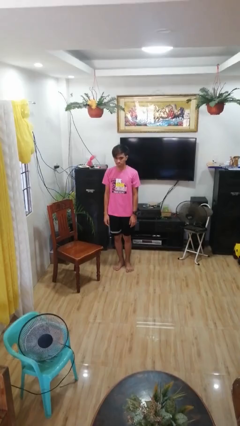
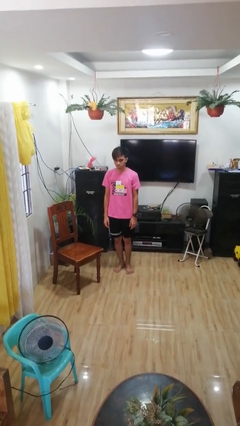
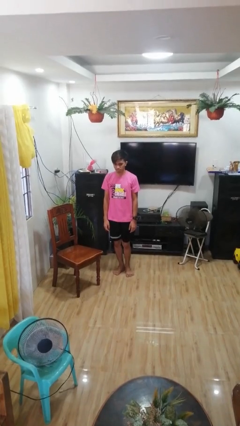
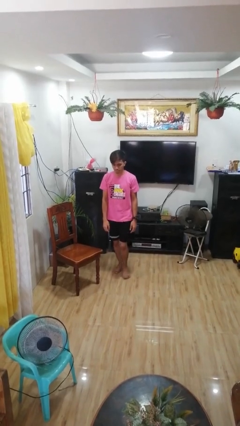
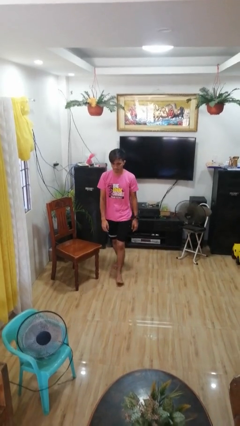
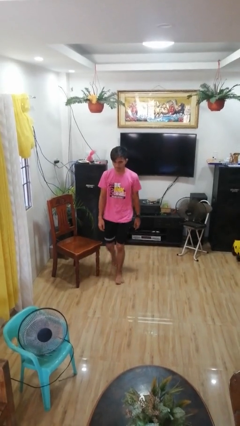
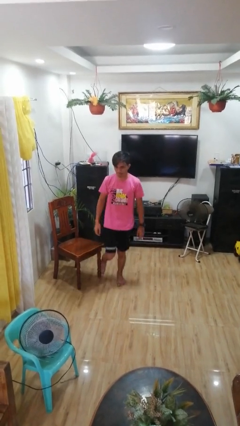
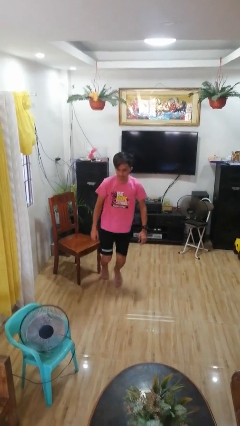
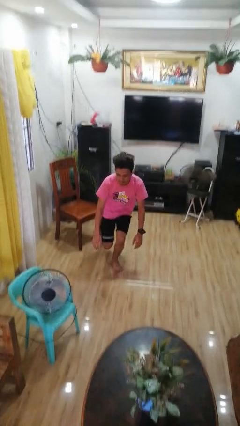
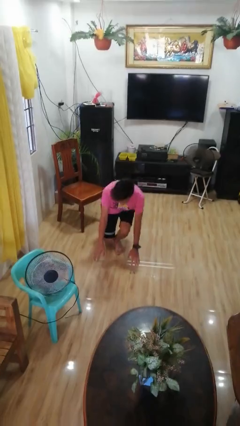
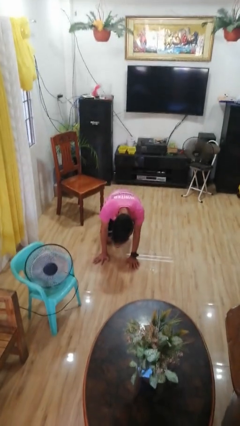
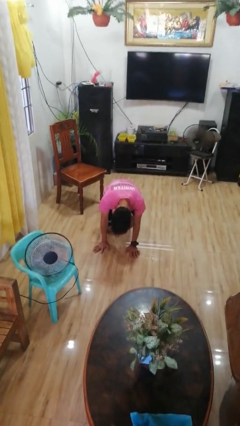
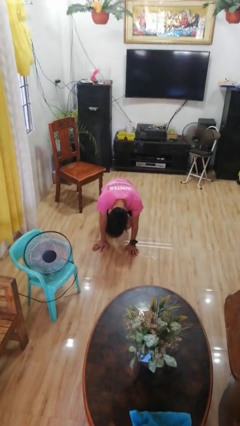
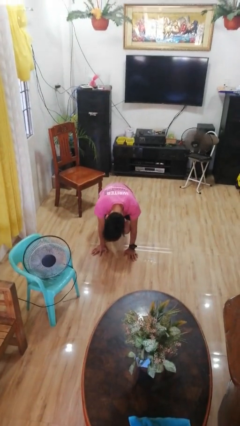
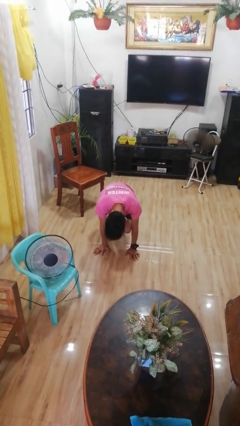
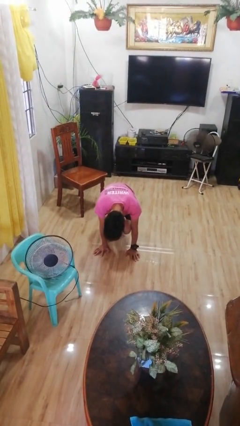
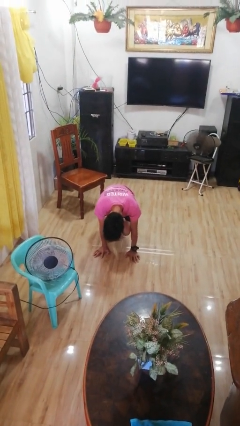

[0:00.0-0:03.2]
person trips on object on floor

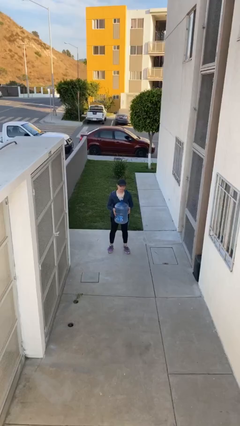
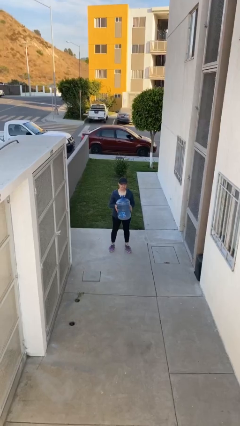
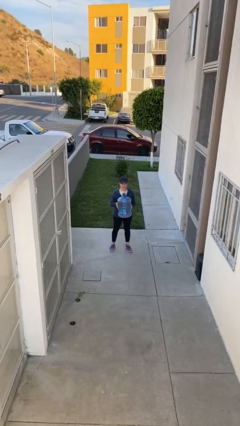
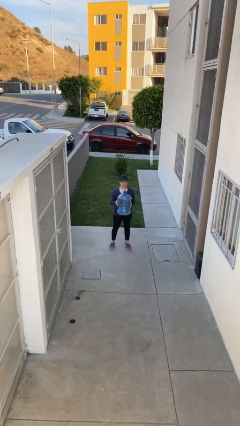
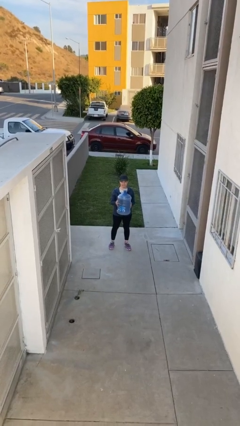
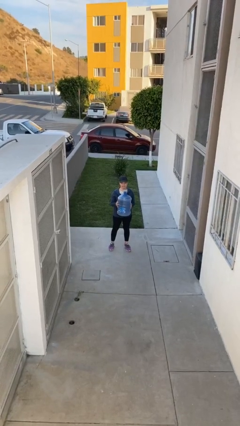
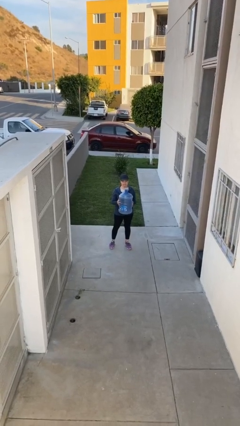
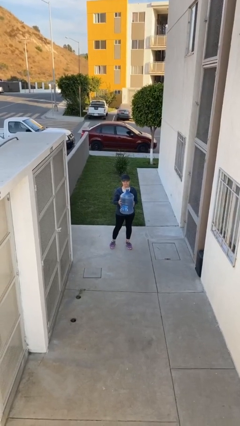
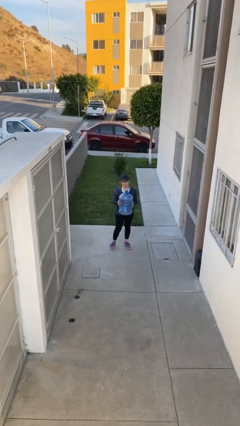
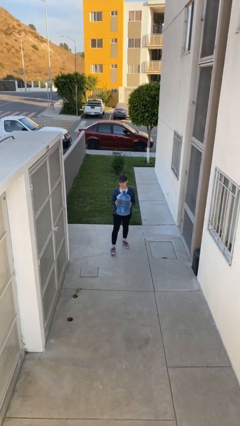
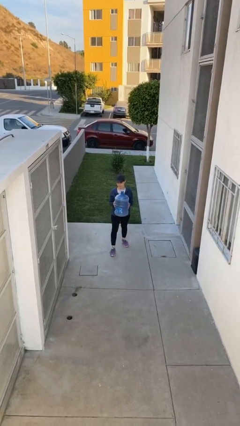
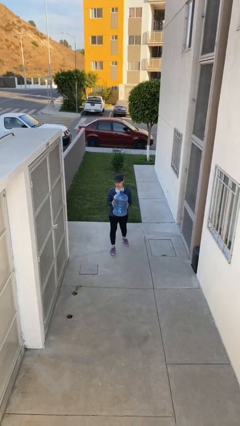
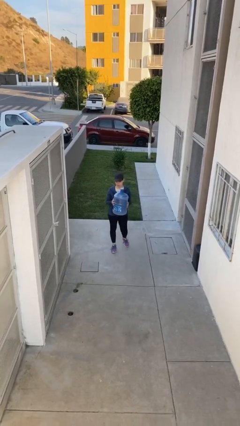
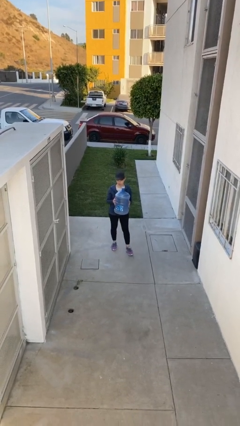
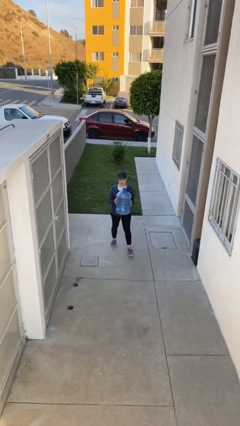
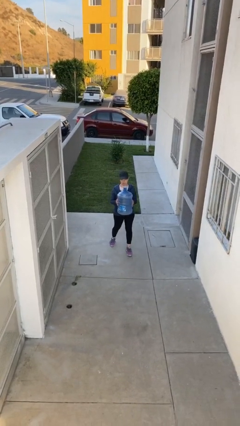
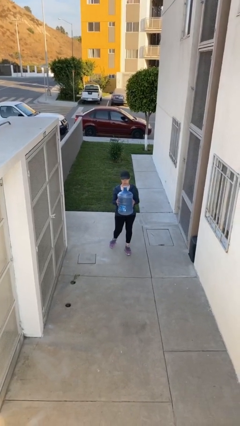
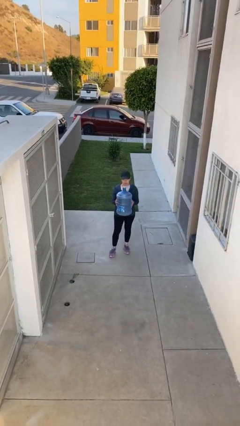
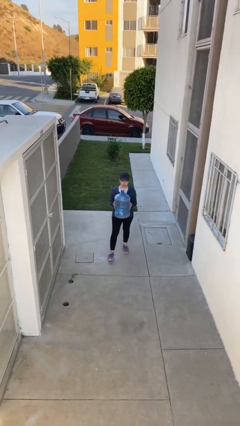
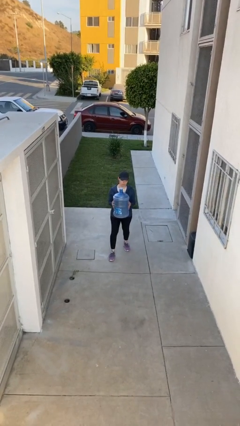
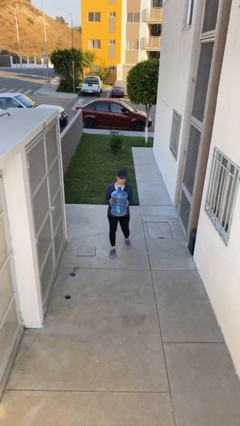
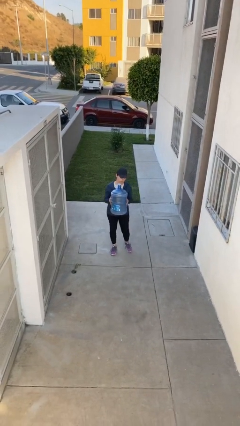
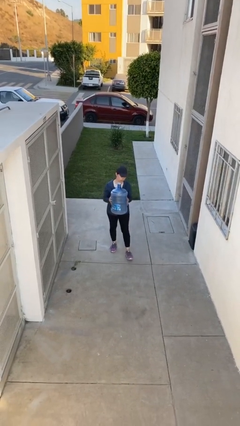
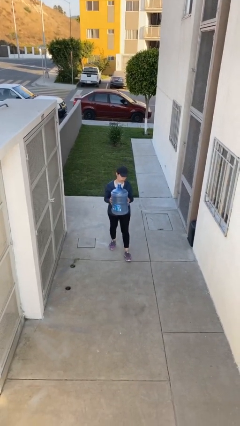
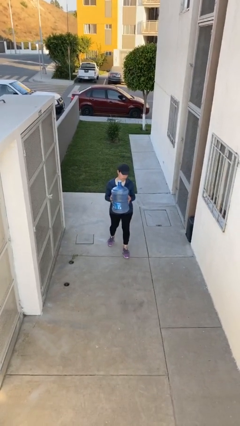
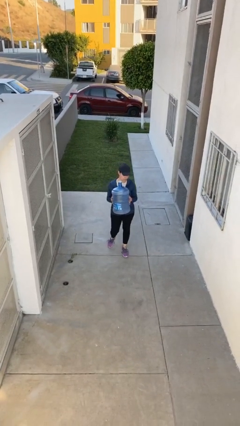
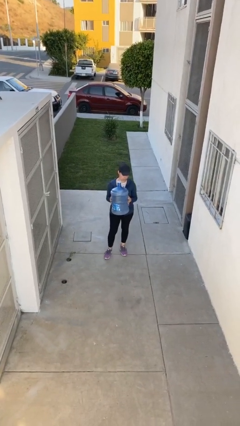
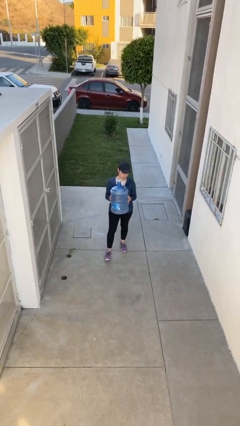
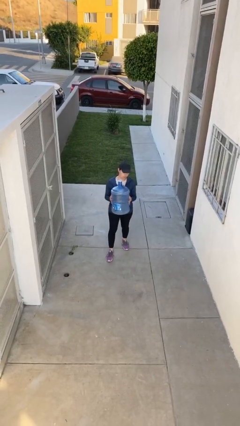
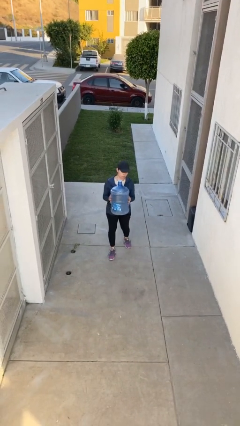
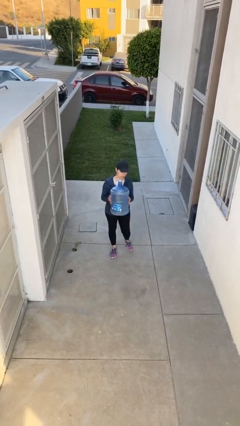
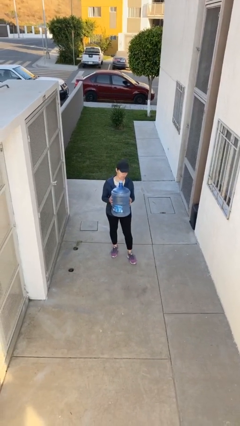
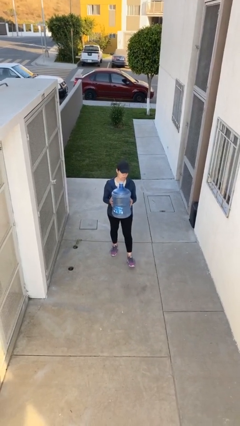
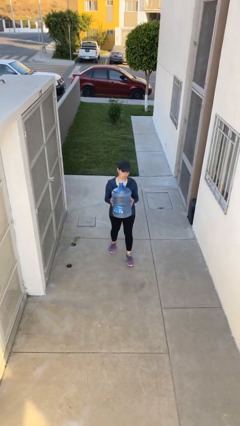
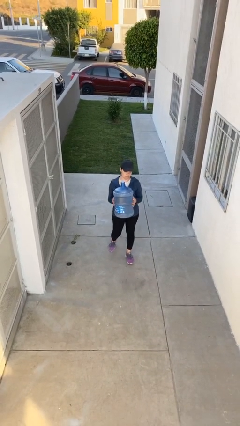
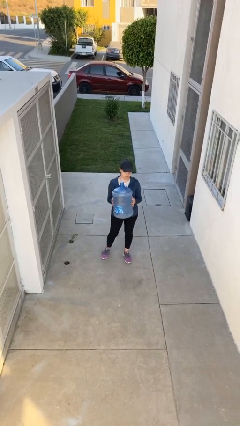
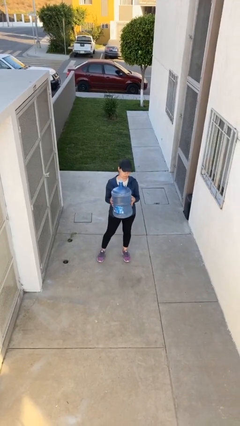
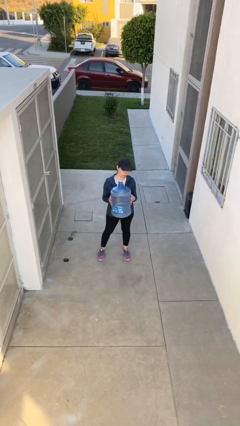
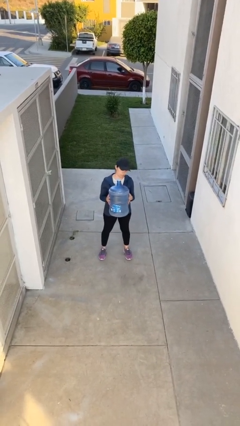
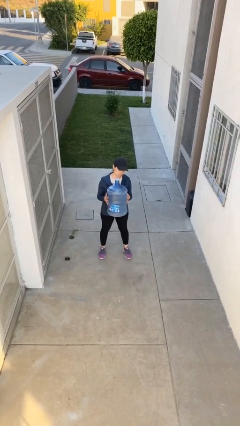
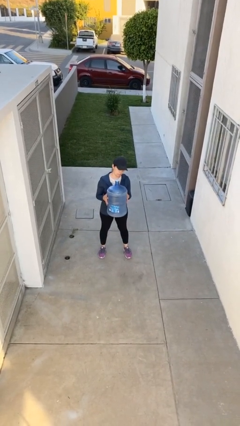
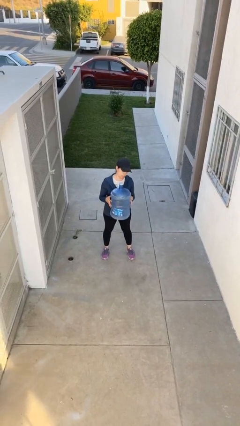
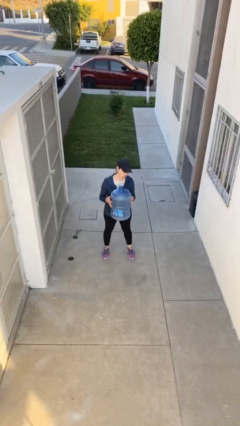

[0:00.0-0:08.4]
person carries heavy object

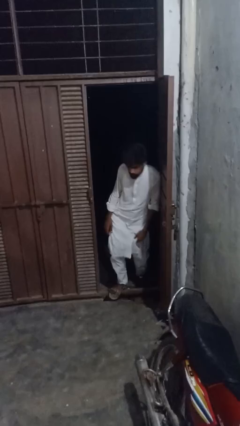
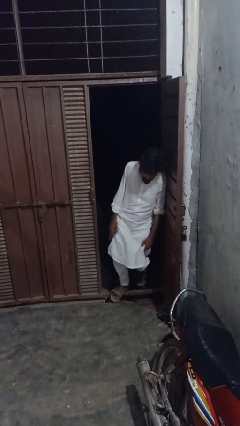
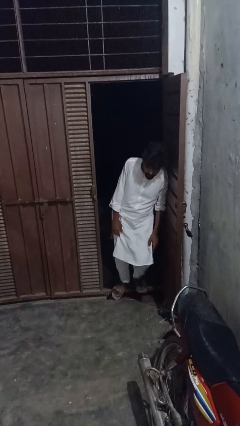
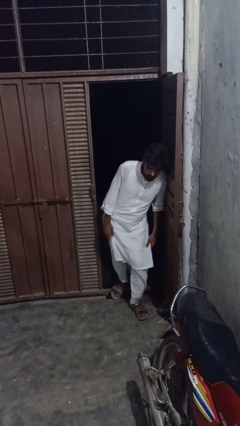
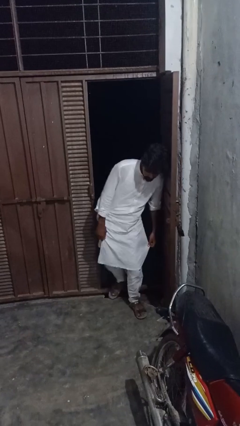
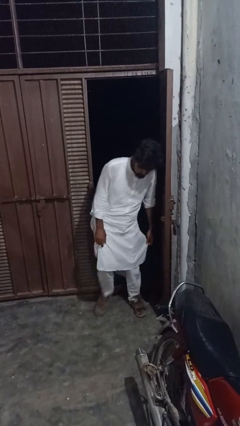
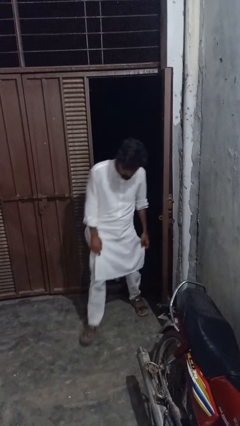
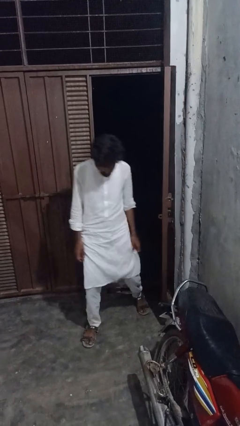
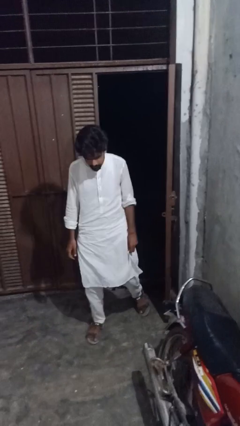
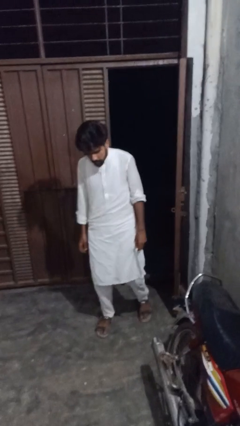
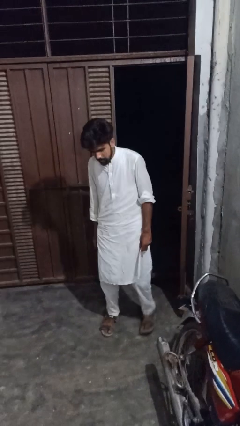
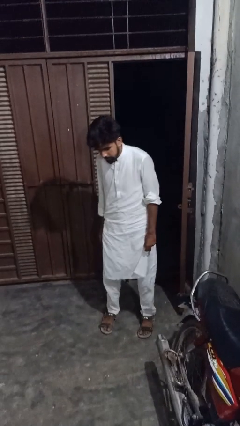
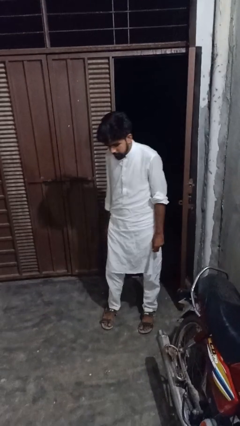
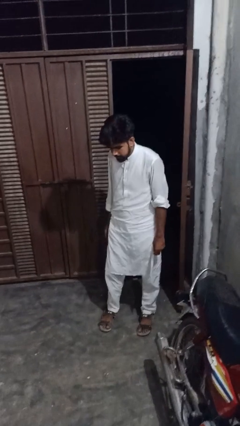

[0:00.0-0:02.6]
person bumps into wall

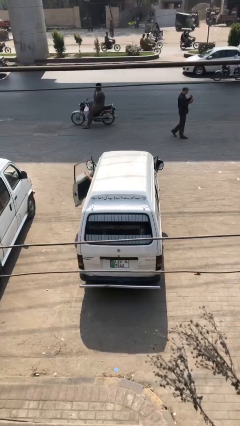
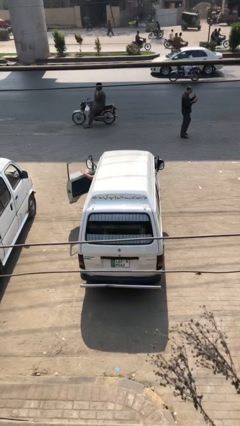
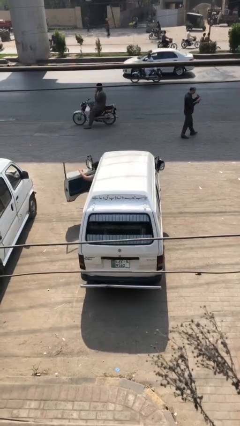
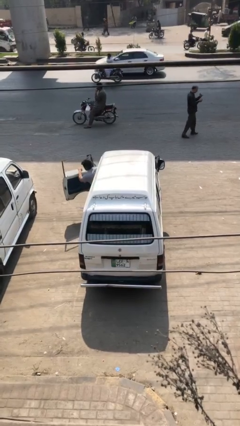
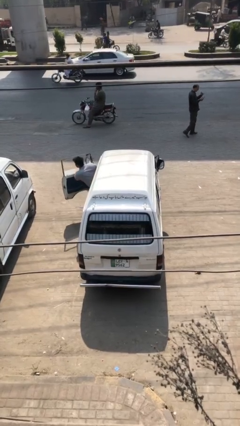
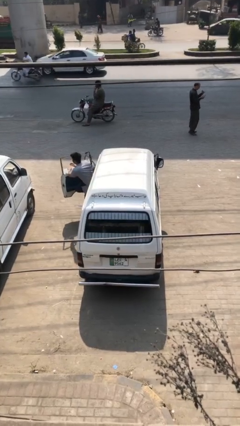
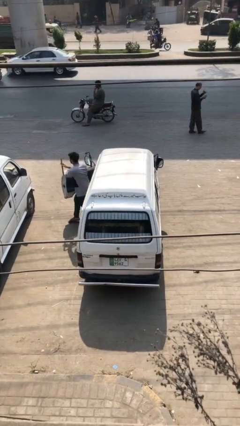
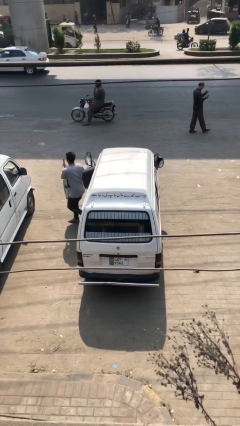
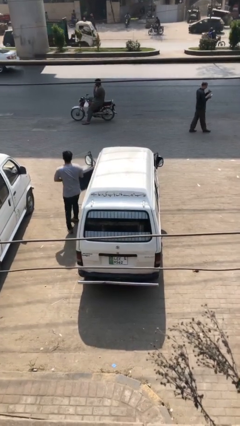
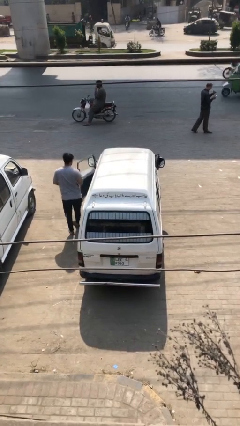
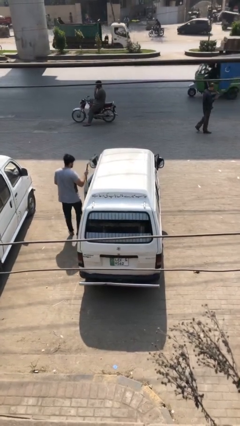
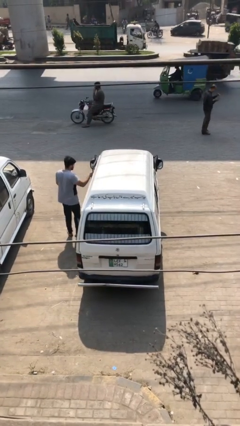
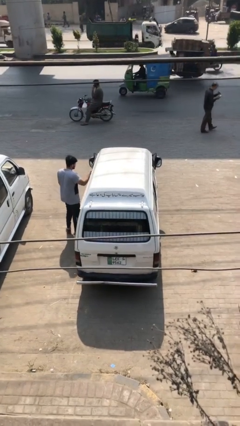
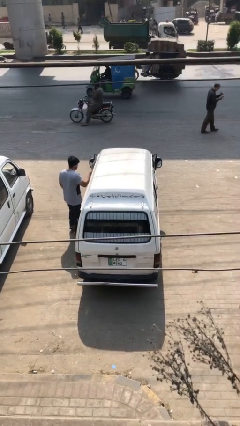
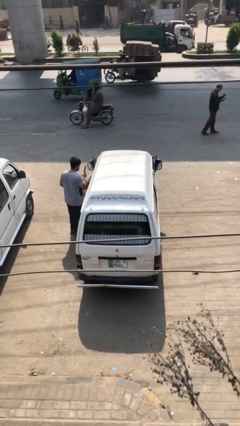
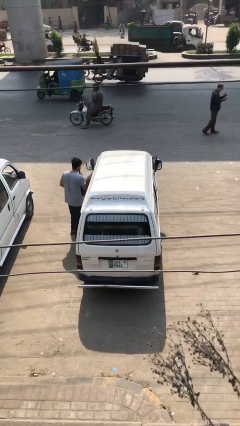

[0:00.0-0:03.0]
car drops off person

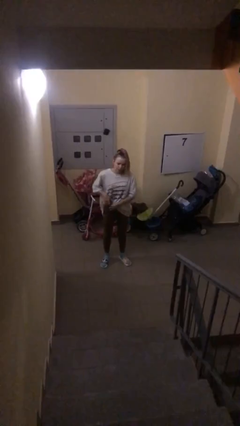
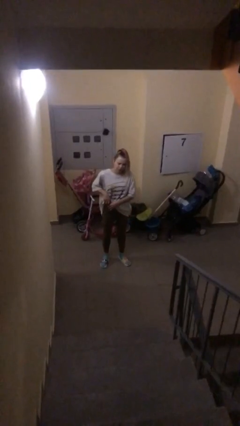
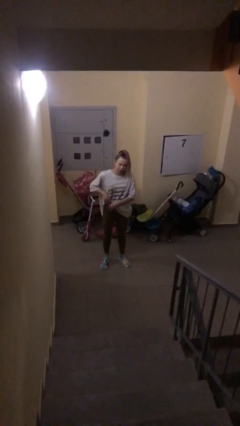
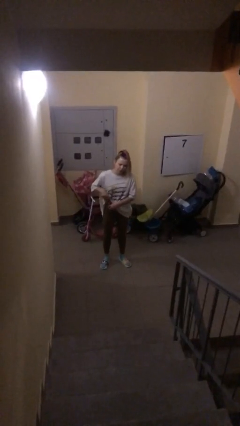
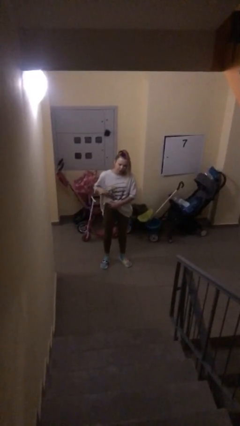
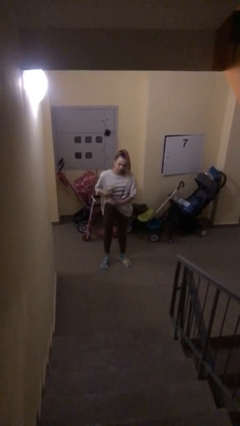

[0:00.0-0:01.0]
person takes phone from pocket
